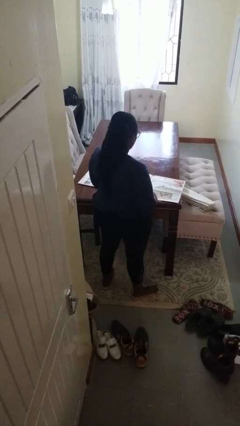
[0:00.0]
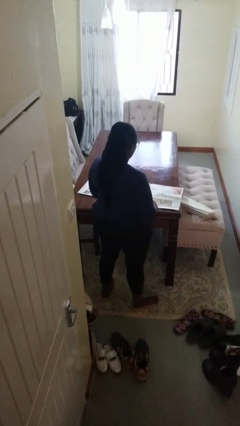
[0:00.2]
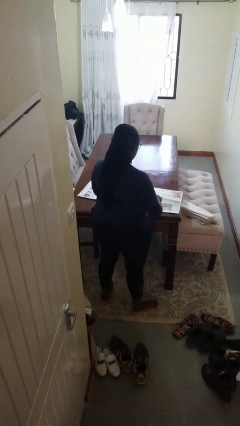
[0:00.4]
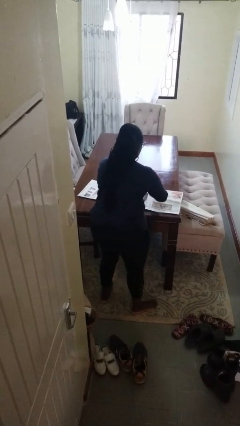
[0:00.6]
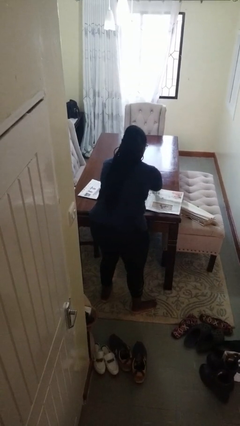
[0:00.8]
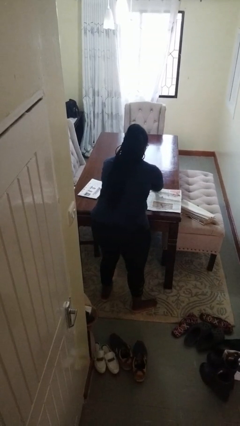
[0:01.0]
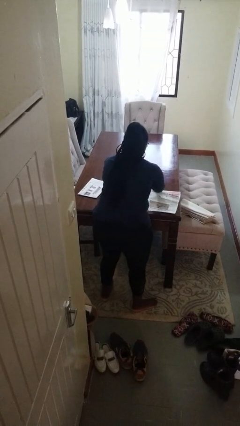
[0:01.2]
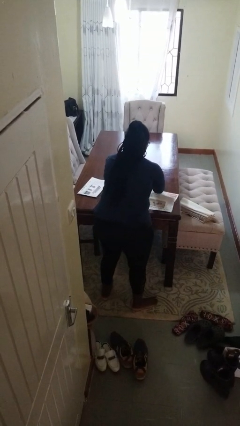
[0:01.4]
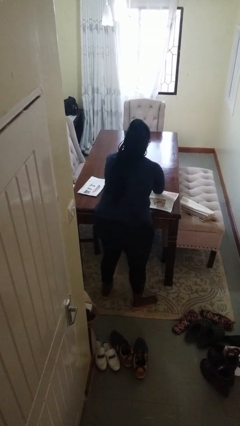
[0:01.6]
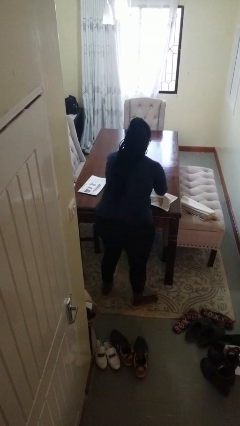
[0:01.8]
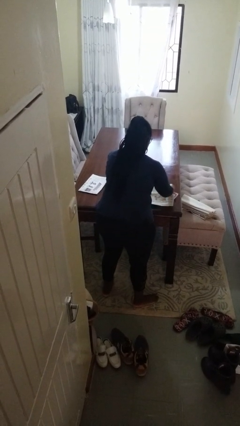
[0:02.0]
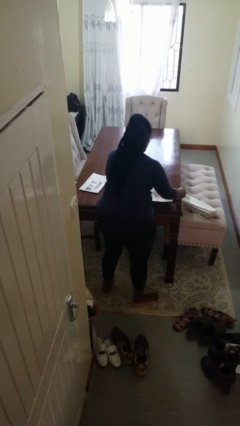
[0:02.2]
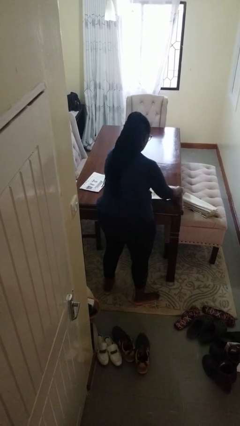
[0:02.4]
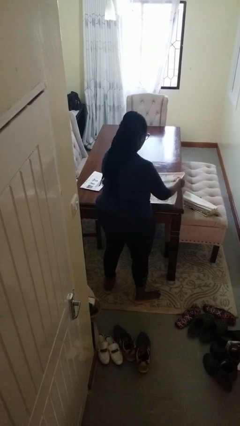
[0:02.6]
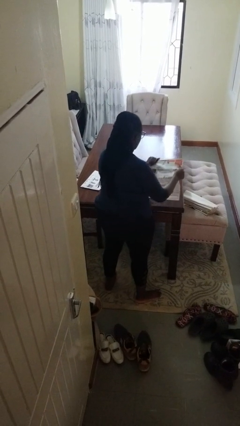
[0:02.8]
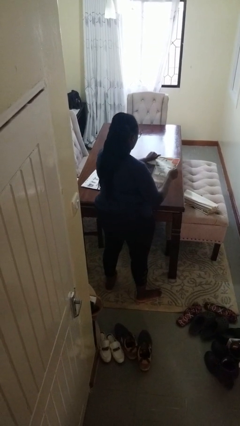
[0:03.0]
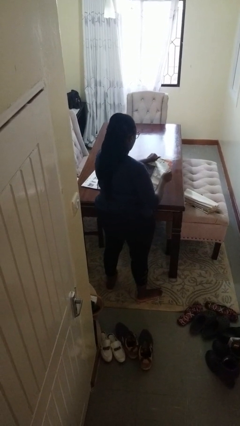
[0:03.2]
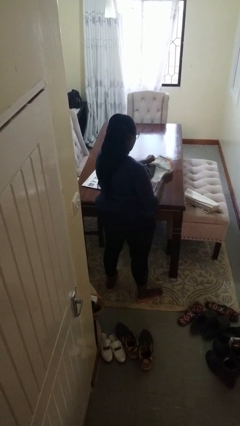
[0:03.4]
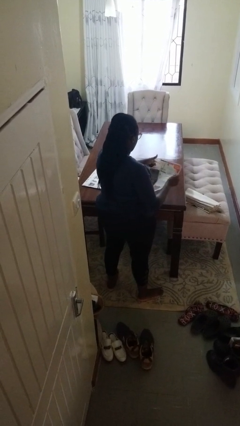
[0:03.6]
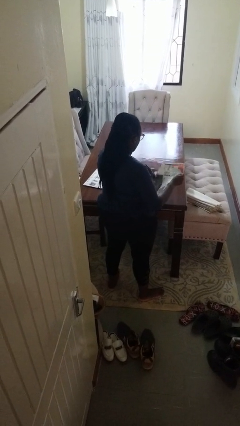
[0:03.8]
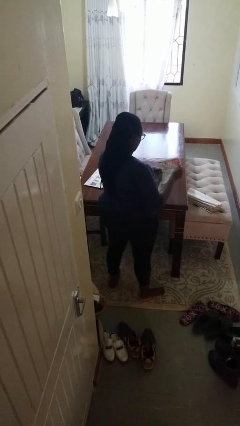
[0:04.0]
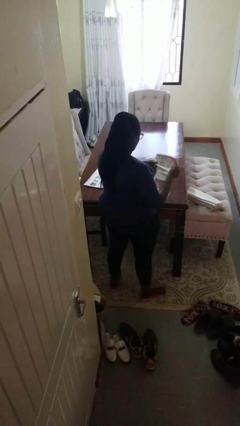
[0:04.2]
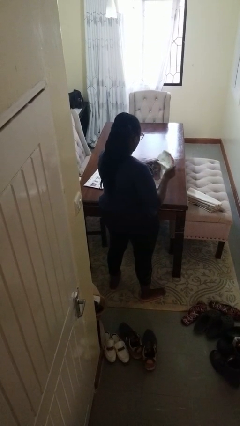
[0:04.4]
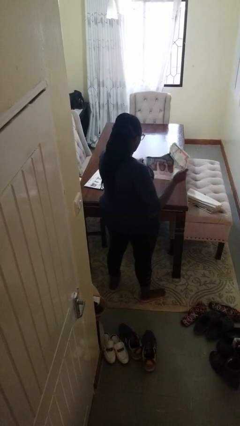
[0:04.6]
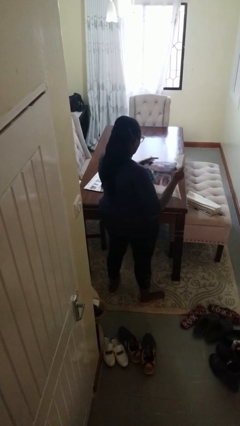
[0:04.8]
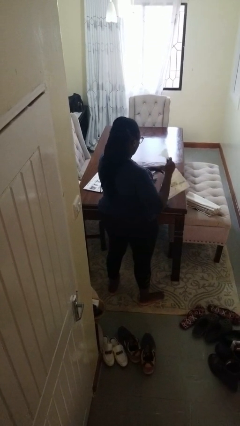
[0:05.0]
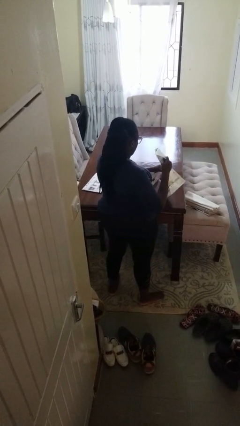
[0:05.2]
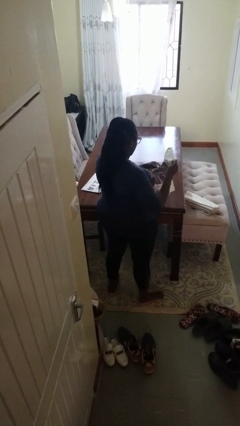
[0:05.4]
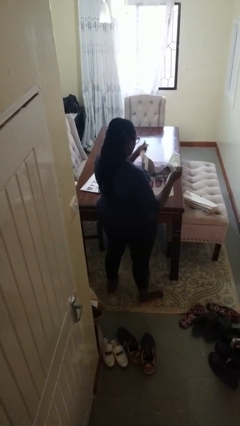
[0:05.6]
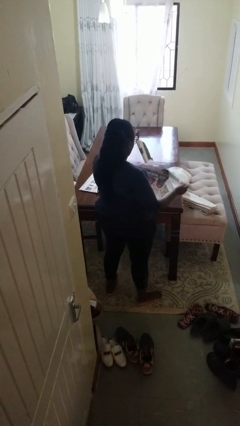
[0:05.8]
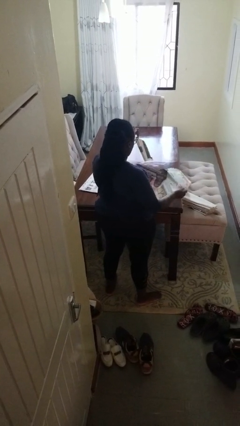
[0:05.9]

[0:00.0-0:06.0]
person tears paper

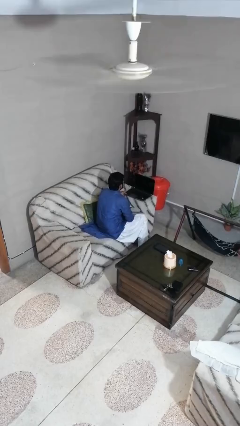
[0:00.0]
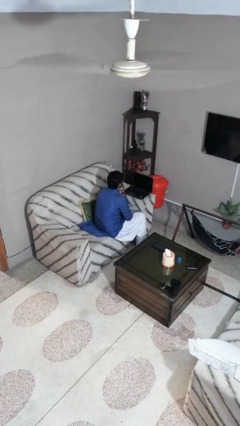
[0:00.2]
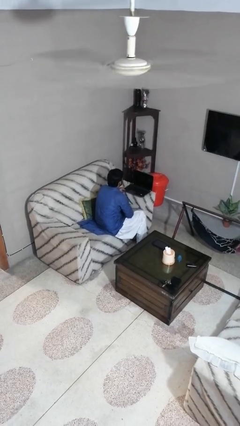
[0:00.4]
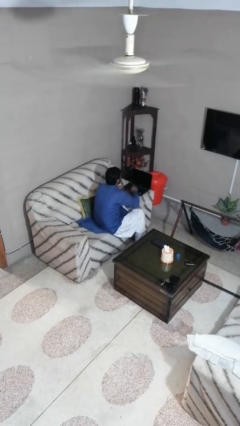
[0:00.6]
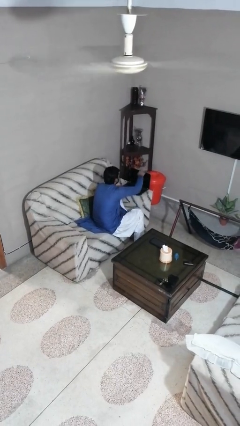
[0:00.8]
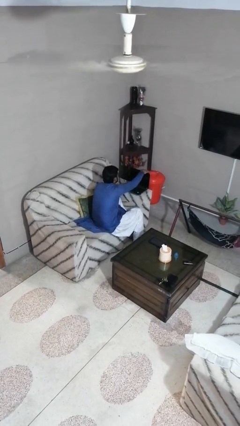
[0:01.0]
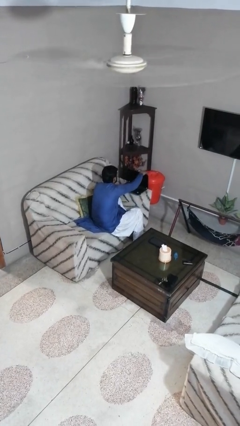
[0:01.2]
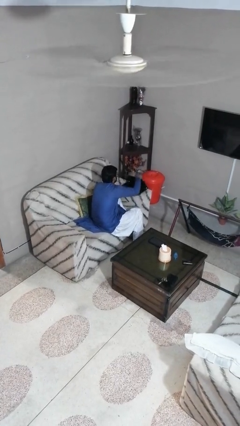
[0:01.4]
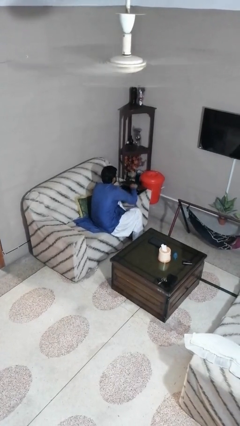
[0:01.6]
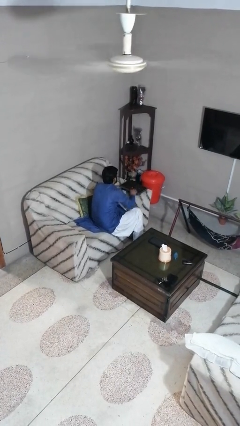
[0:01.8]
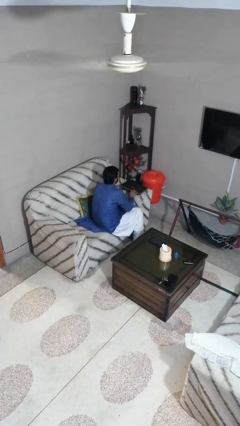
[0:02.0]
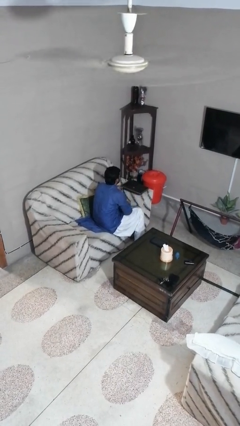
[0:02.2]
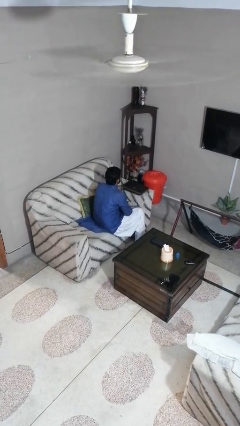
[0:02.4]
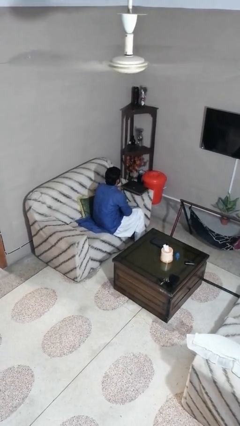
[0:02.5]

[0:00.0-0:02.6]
person closes laptop

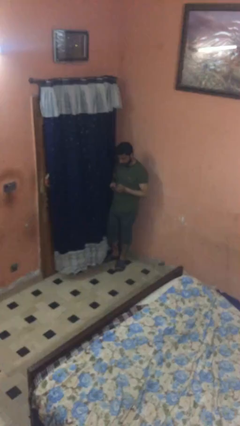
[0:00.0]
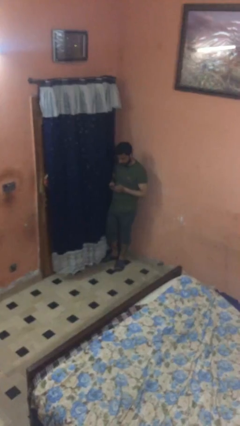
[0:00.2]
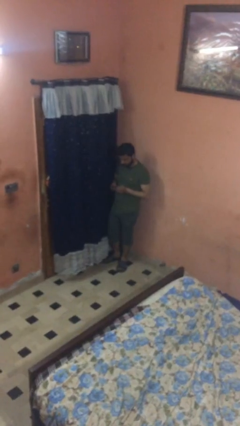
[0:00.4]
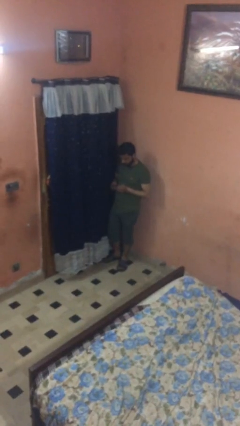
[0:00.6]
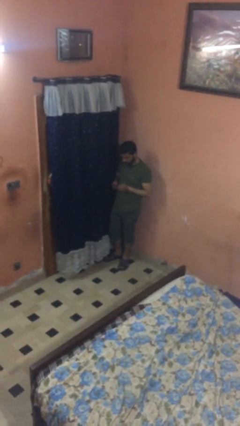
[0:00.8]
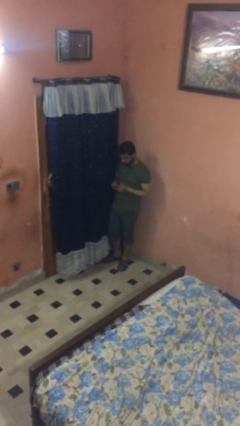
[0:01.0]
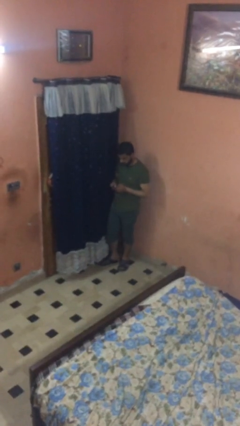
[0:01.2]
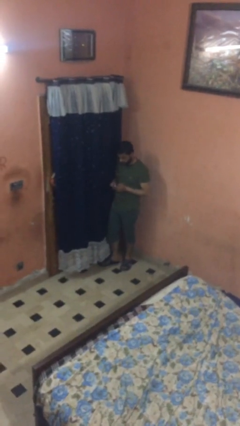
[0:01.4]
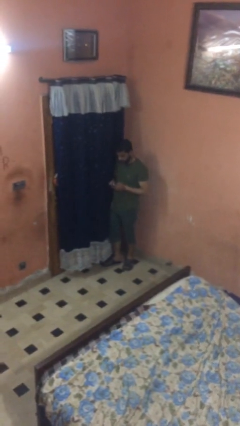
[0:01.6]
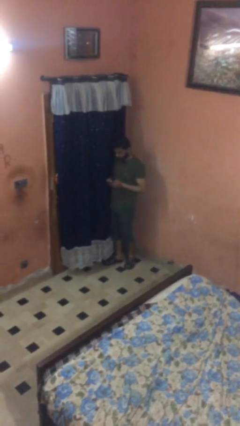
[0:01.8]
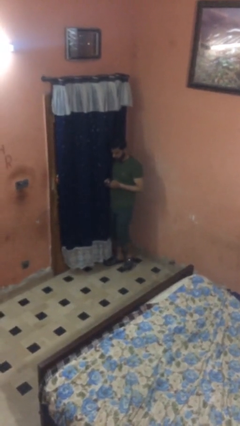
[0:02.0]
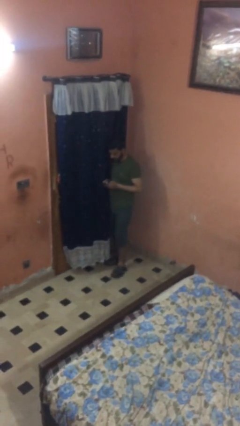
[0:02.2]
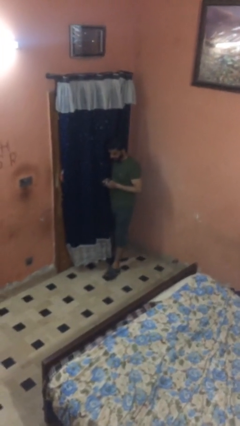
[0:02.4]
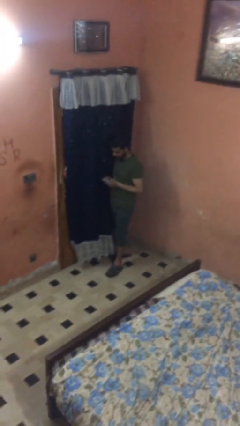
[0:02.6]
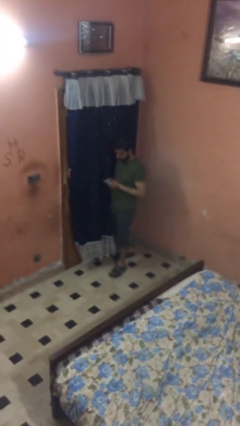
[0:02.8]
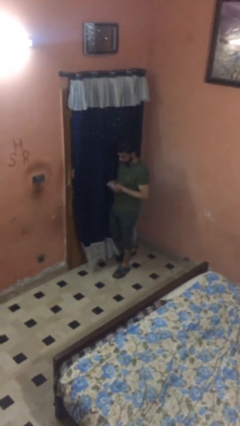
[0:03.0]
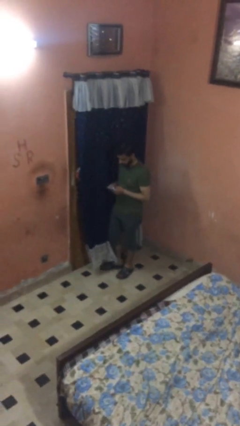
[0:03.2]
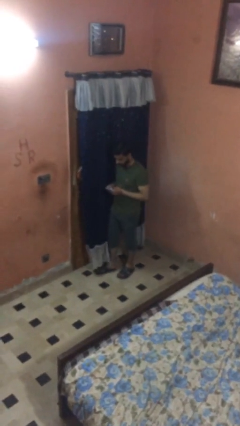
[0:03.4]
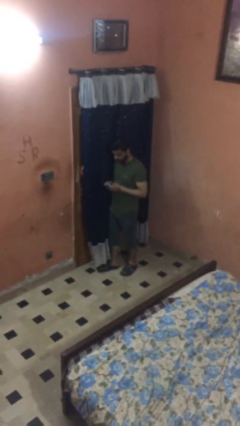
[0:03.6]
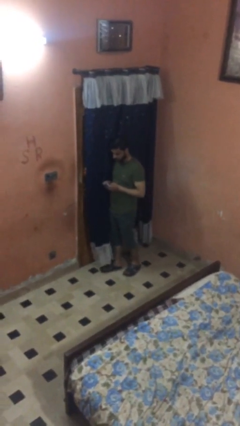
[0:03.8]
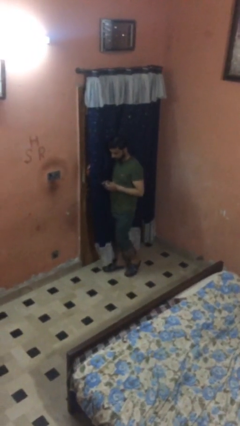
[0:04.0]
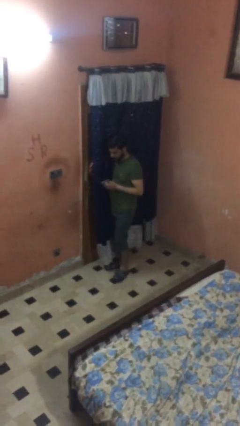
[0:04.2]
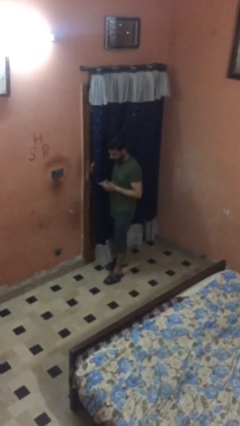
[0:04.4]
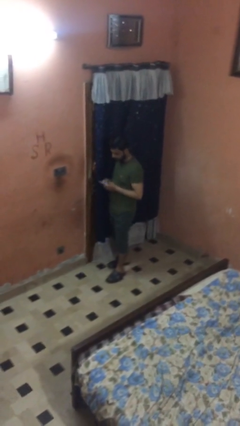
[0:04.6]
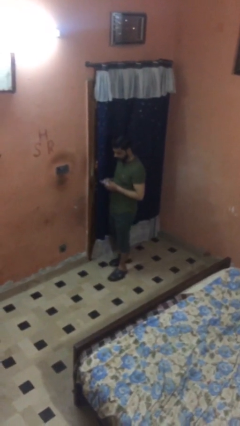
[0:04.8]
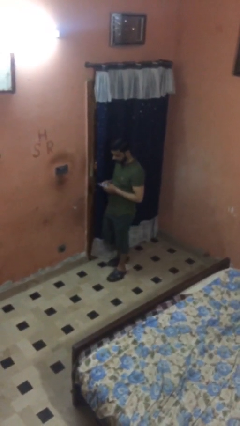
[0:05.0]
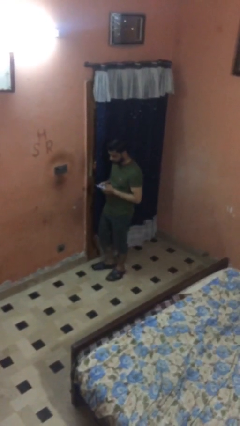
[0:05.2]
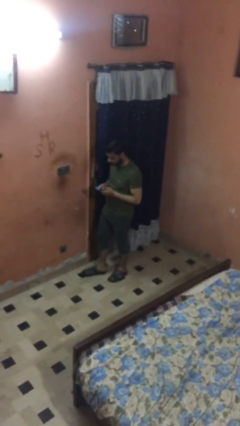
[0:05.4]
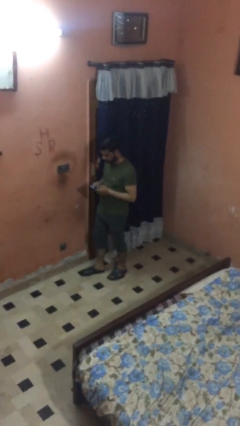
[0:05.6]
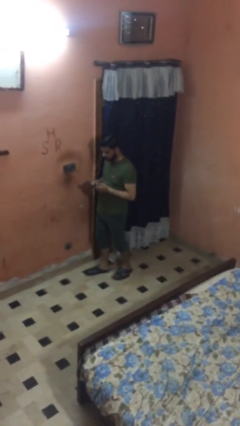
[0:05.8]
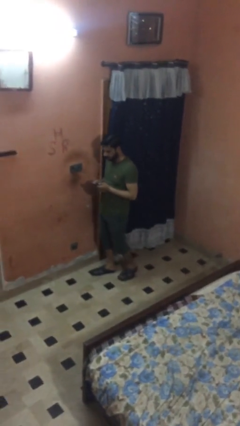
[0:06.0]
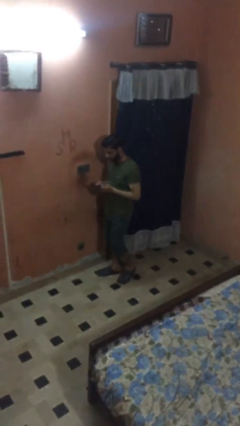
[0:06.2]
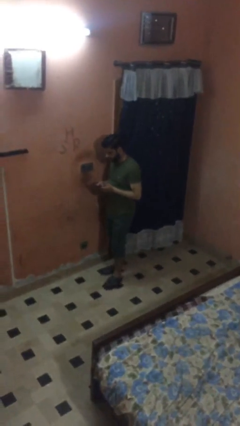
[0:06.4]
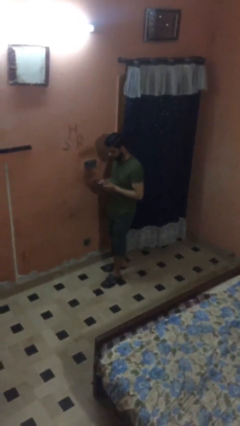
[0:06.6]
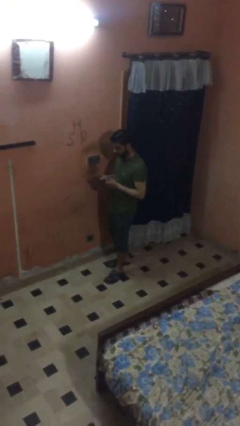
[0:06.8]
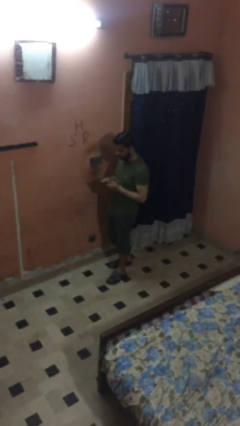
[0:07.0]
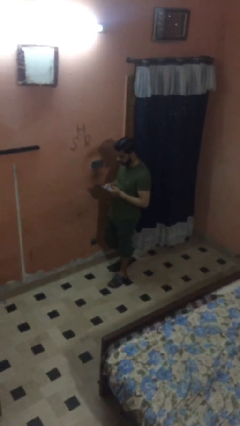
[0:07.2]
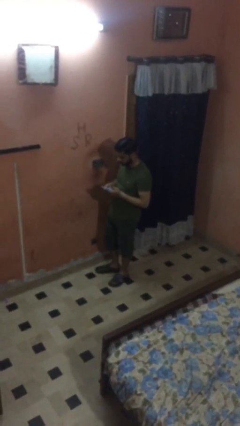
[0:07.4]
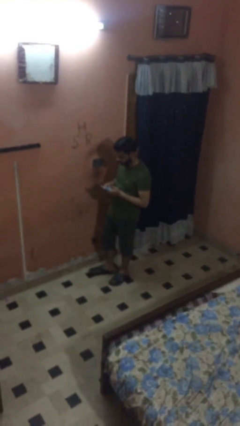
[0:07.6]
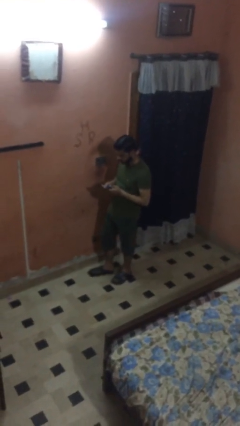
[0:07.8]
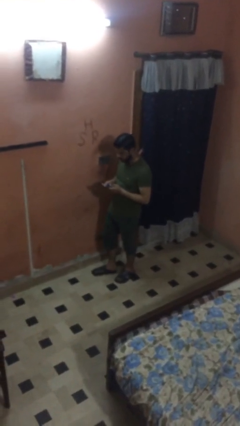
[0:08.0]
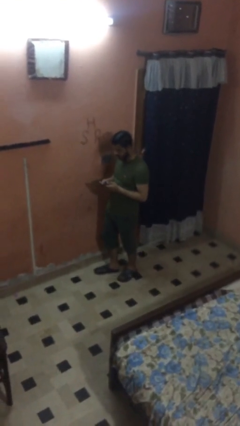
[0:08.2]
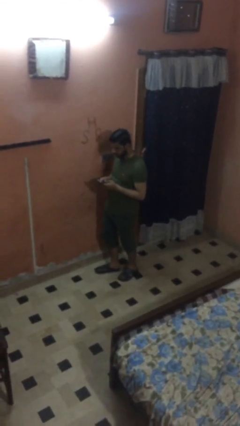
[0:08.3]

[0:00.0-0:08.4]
person texts on phone

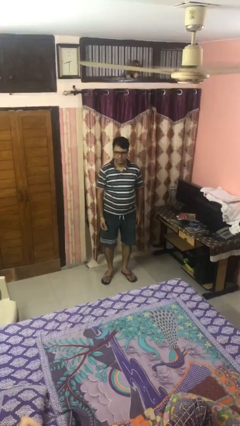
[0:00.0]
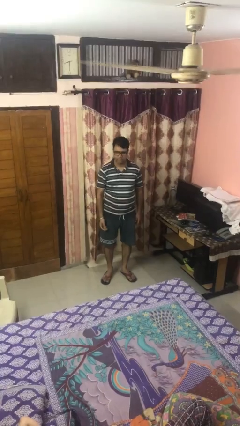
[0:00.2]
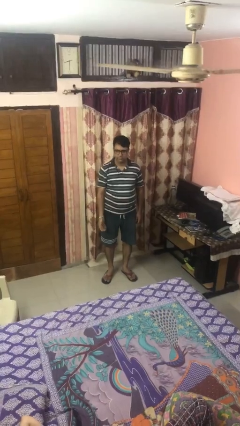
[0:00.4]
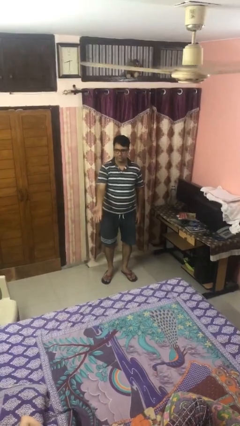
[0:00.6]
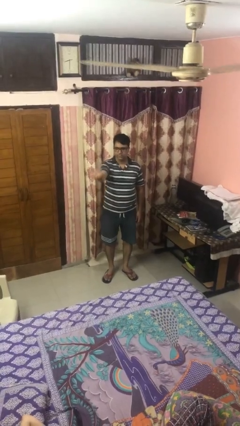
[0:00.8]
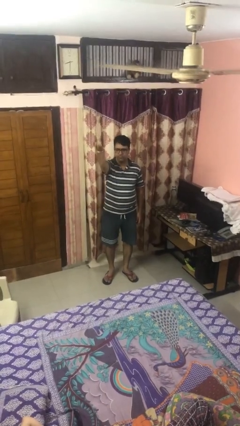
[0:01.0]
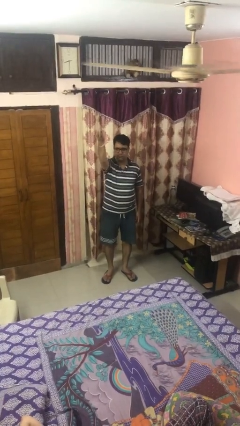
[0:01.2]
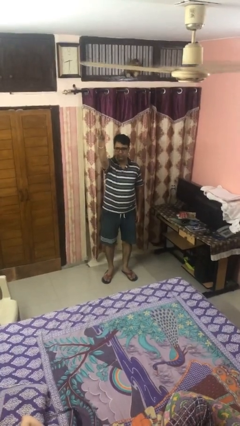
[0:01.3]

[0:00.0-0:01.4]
person gestures swipe up
